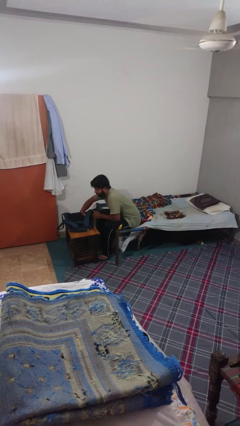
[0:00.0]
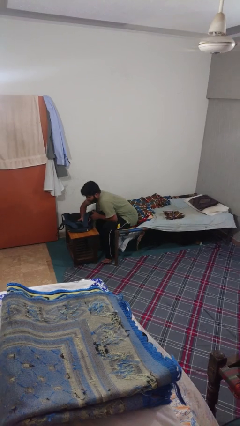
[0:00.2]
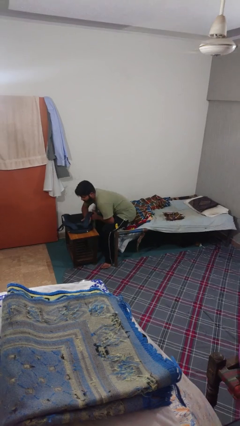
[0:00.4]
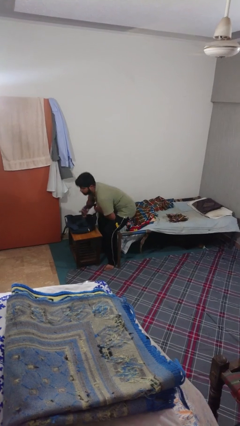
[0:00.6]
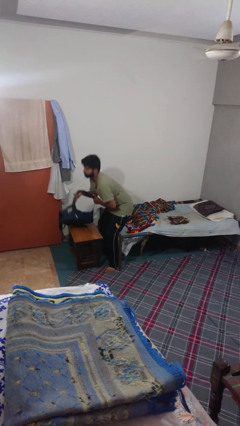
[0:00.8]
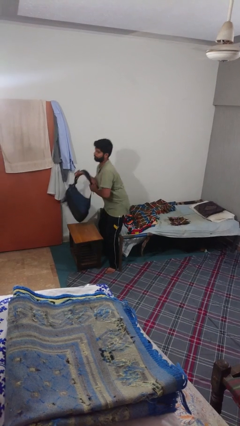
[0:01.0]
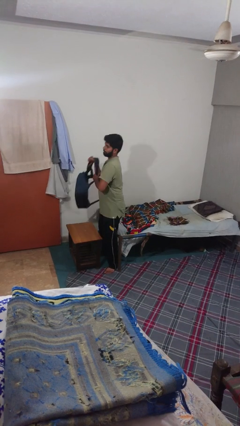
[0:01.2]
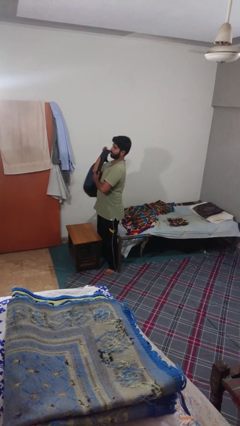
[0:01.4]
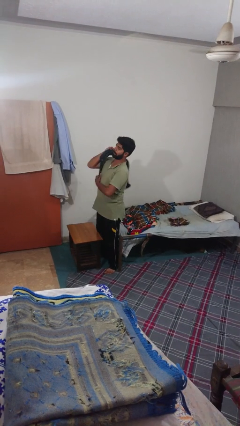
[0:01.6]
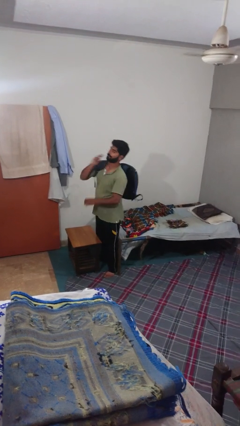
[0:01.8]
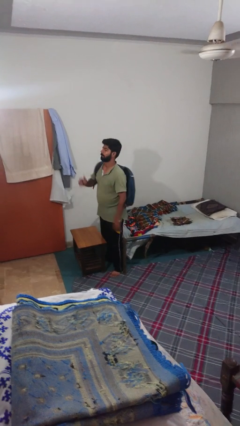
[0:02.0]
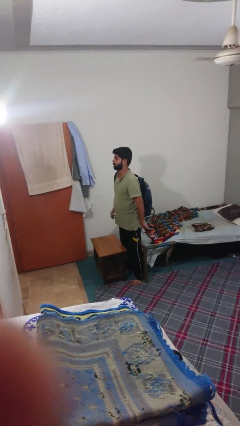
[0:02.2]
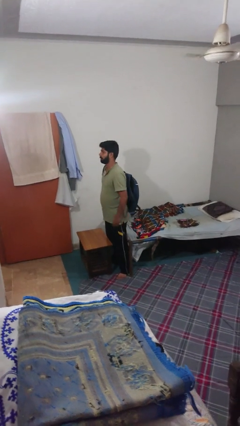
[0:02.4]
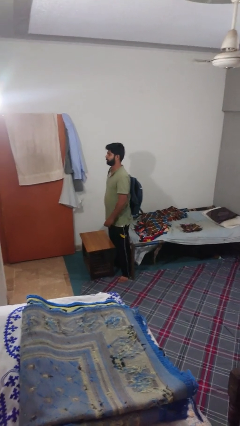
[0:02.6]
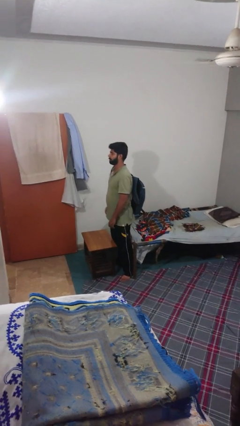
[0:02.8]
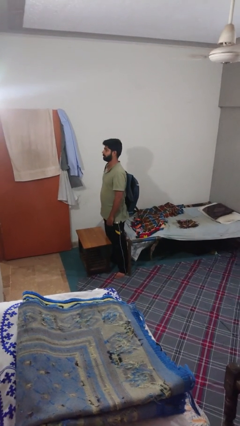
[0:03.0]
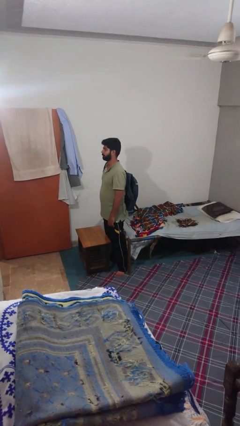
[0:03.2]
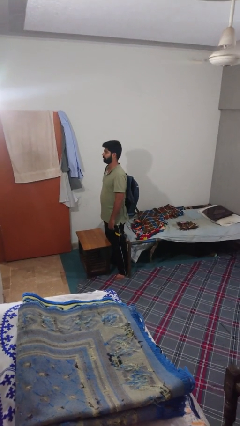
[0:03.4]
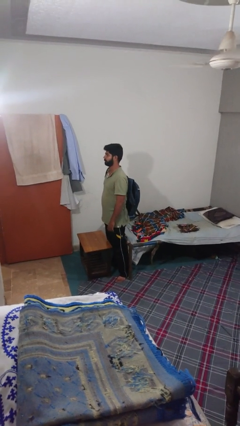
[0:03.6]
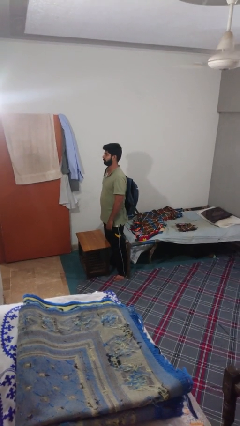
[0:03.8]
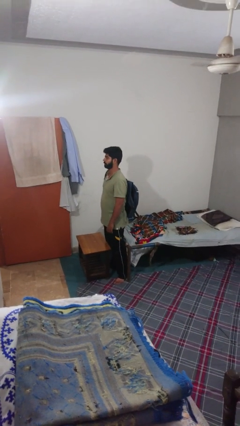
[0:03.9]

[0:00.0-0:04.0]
person puts on backpack

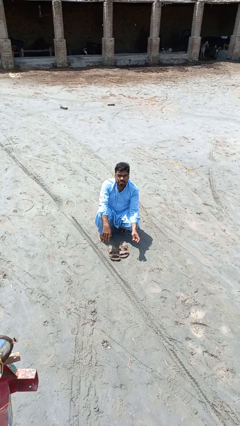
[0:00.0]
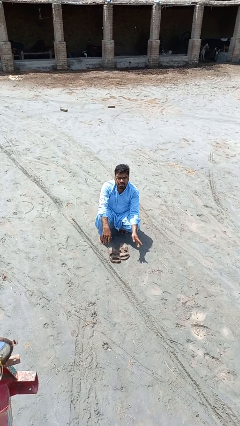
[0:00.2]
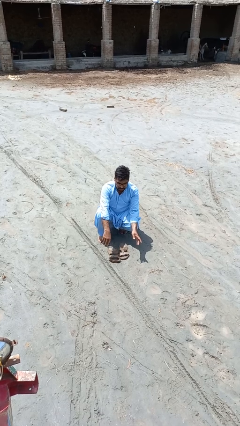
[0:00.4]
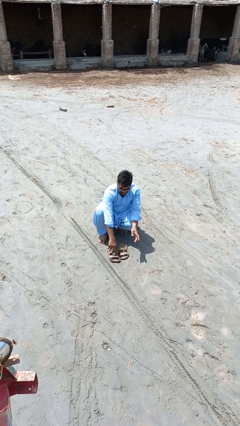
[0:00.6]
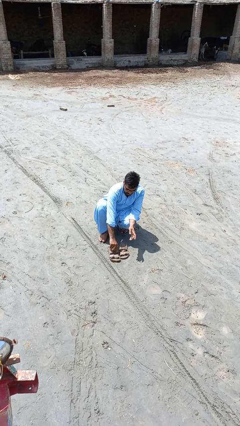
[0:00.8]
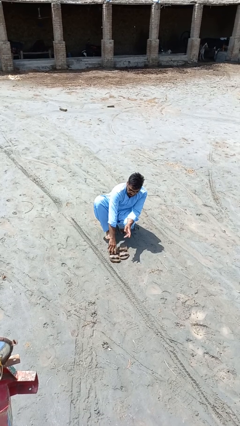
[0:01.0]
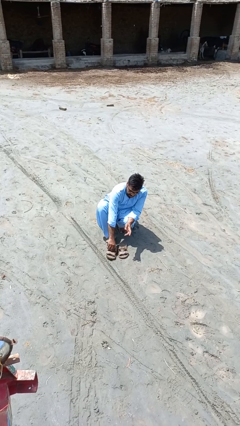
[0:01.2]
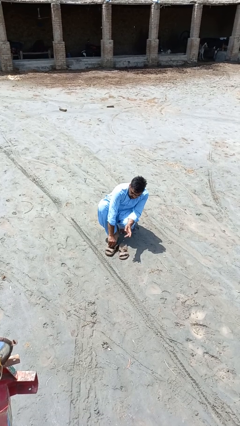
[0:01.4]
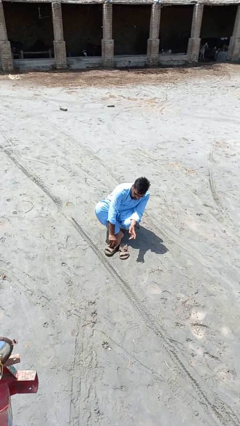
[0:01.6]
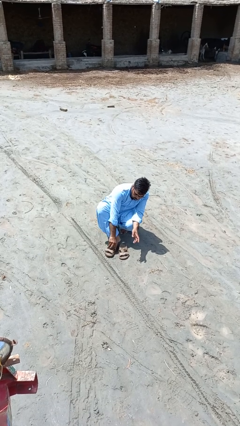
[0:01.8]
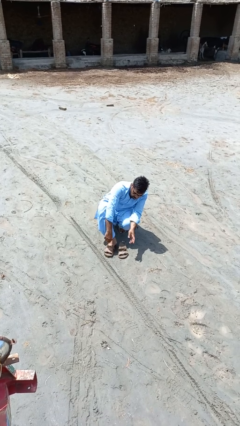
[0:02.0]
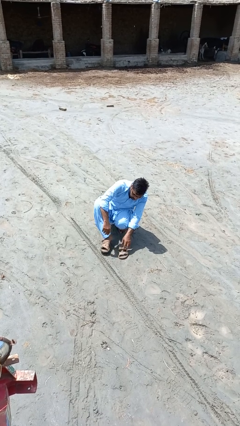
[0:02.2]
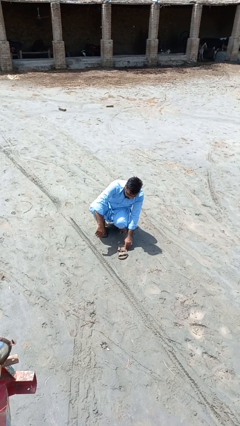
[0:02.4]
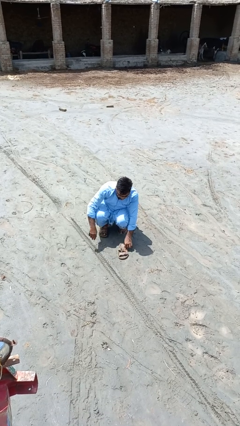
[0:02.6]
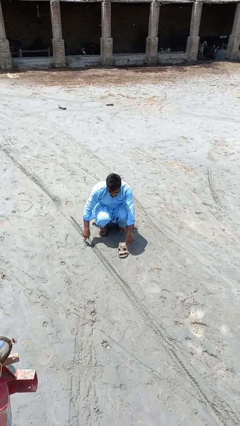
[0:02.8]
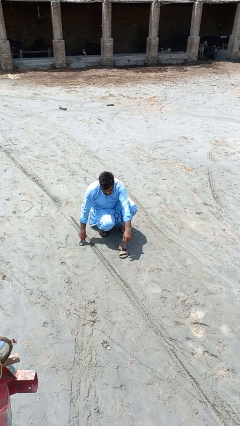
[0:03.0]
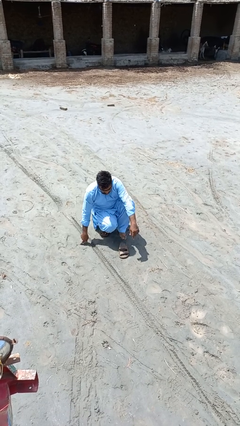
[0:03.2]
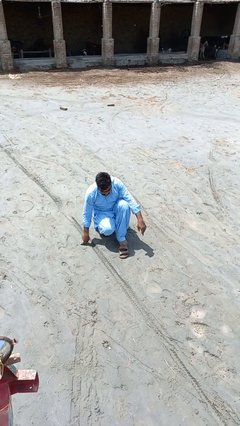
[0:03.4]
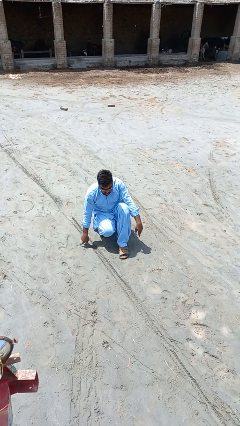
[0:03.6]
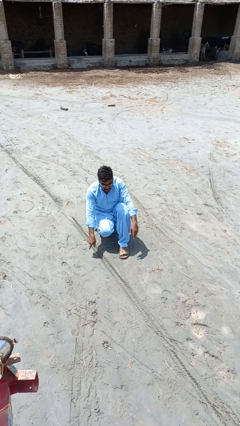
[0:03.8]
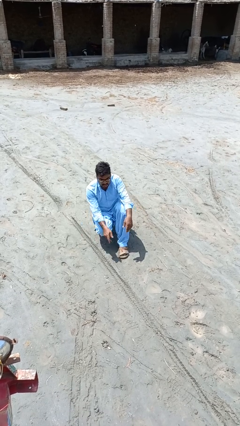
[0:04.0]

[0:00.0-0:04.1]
person puts on shoes

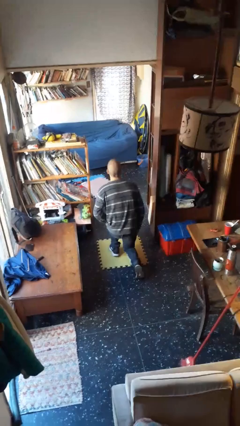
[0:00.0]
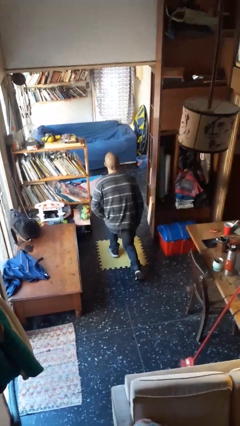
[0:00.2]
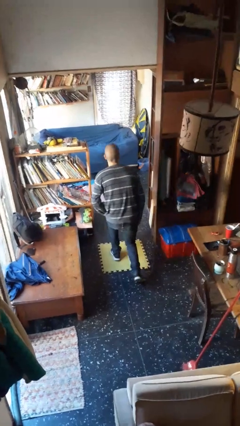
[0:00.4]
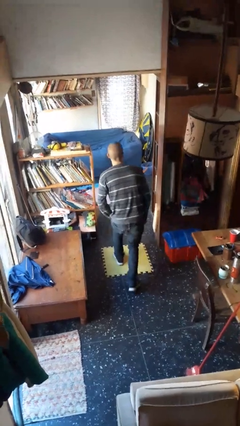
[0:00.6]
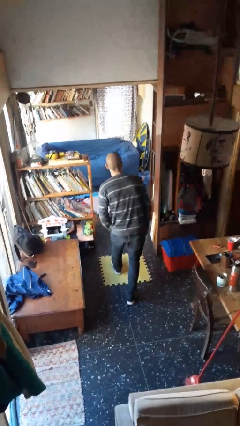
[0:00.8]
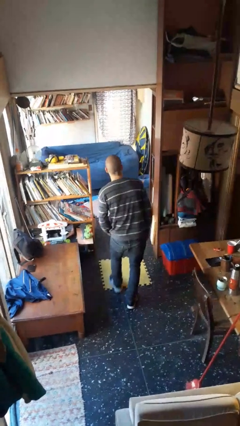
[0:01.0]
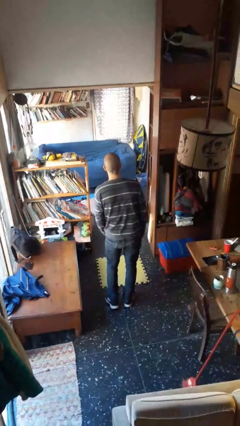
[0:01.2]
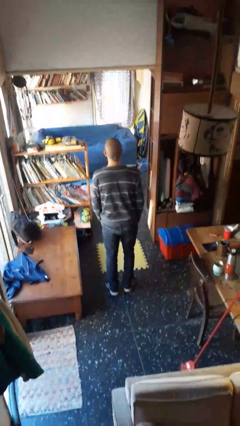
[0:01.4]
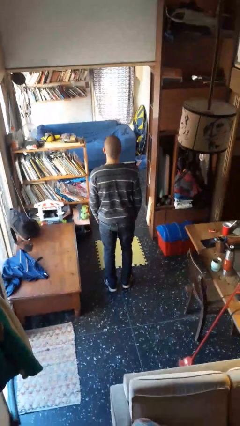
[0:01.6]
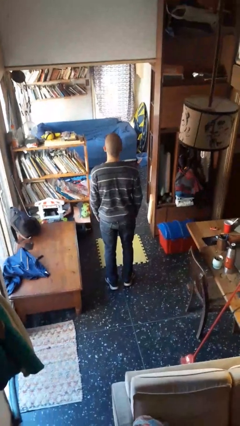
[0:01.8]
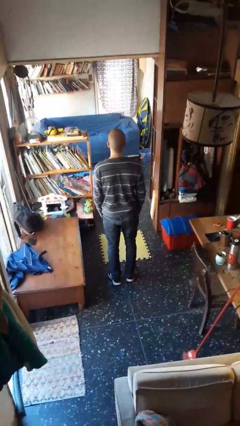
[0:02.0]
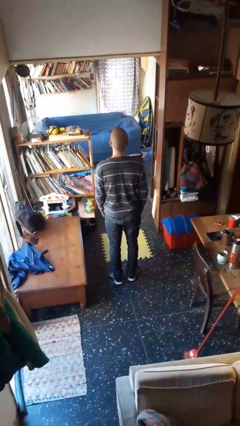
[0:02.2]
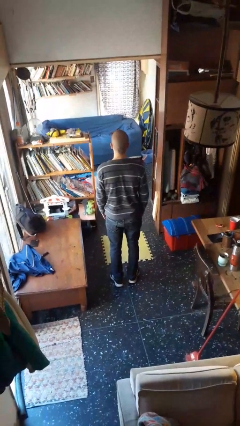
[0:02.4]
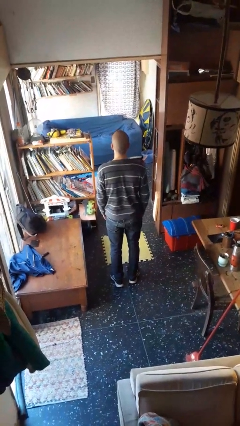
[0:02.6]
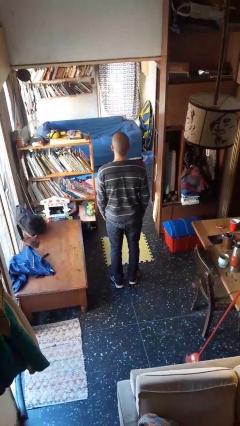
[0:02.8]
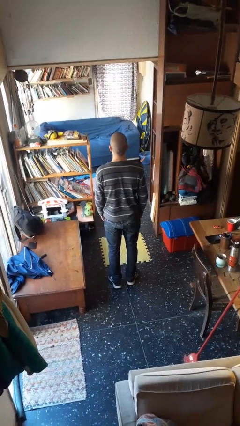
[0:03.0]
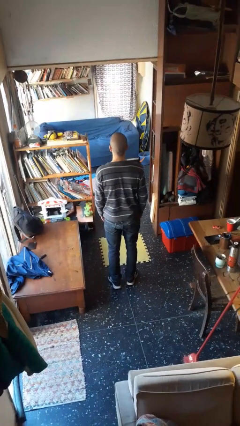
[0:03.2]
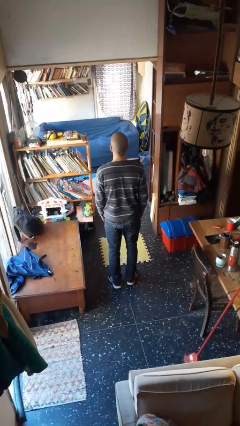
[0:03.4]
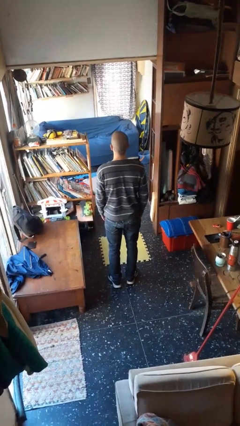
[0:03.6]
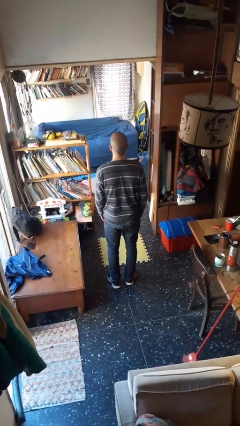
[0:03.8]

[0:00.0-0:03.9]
person stands up from floor

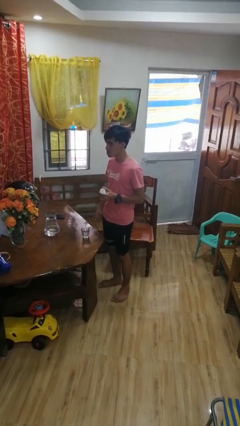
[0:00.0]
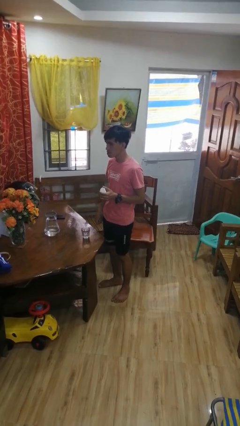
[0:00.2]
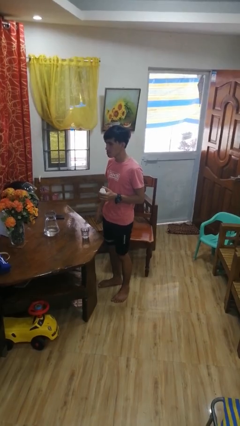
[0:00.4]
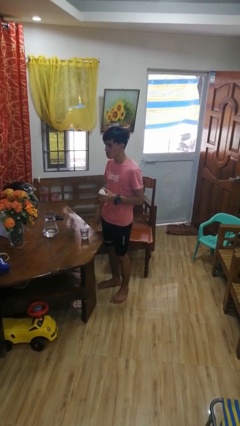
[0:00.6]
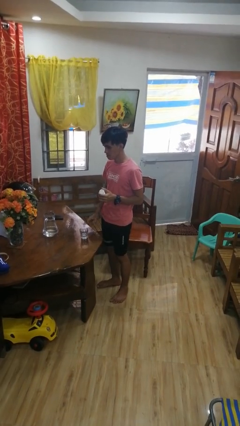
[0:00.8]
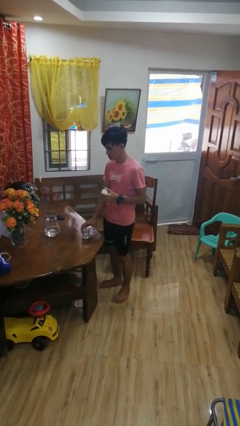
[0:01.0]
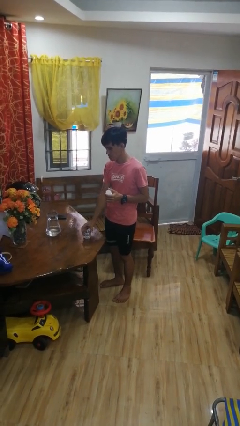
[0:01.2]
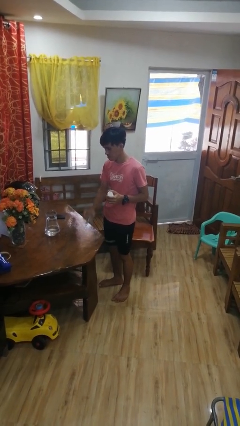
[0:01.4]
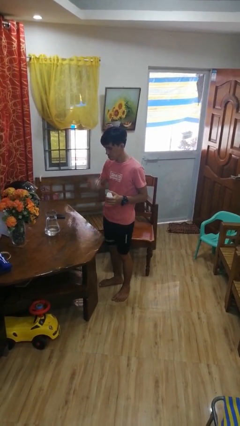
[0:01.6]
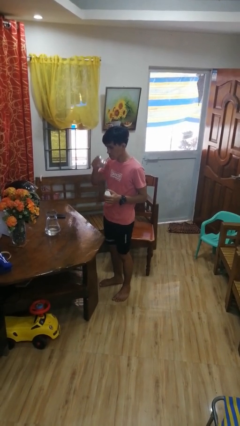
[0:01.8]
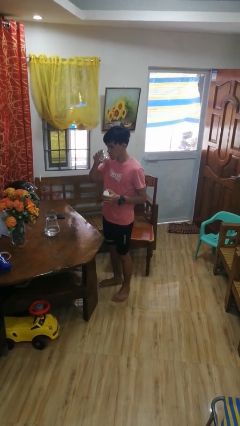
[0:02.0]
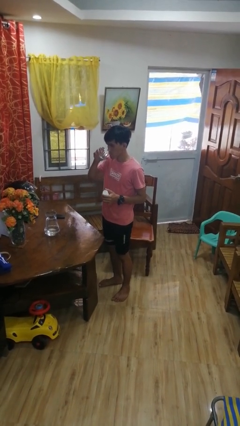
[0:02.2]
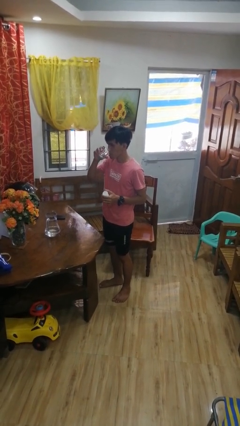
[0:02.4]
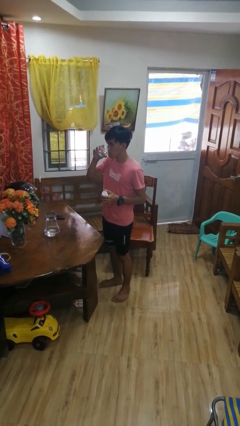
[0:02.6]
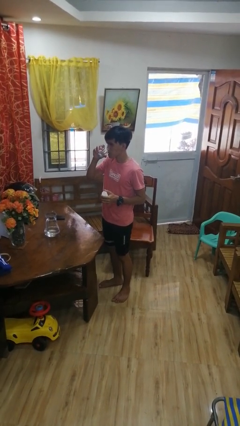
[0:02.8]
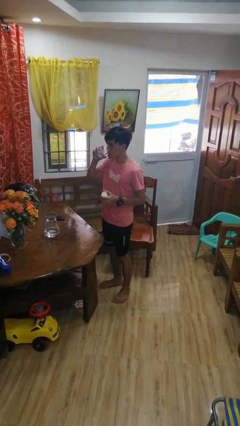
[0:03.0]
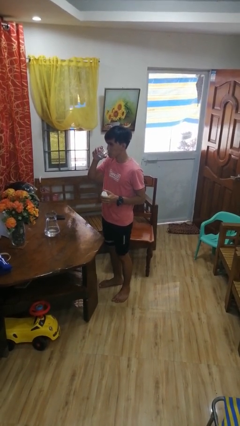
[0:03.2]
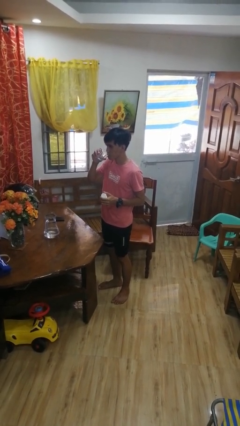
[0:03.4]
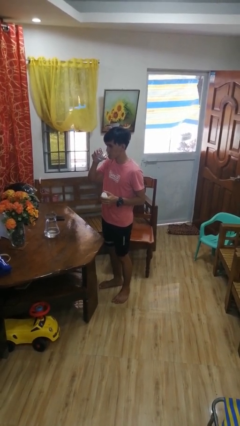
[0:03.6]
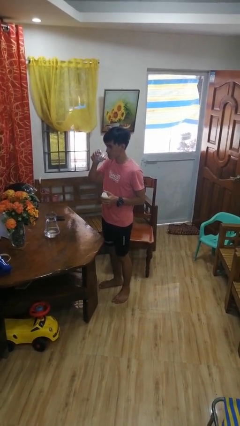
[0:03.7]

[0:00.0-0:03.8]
person drinks from cup

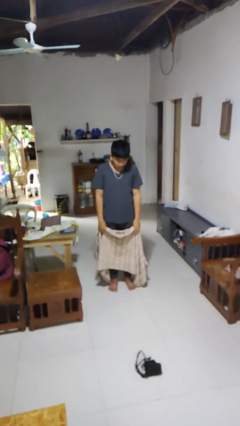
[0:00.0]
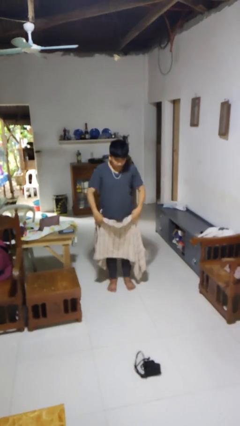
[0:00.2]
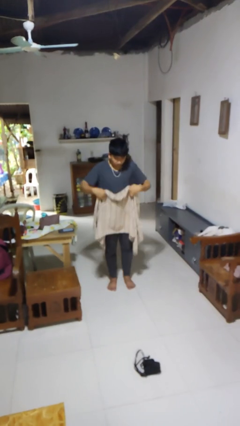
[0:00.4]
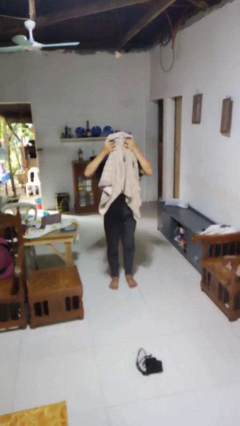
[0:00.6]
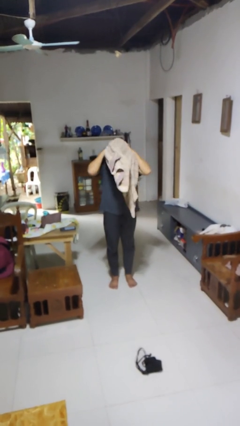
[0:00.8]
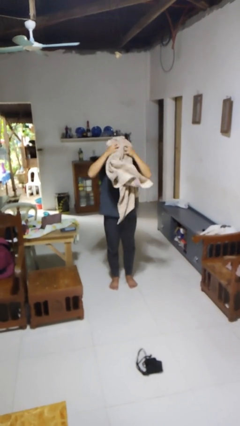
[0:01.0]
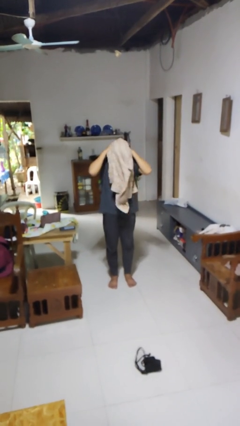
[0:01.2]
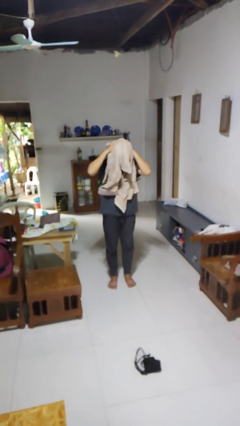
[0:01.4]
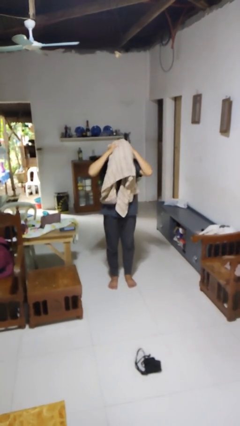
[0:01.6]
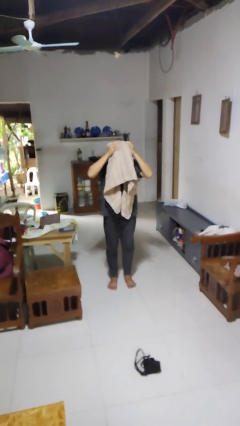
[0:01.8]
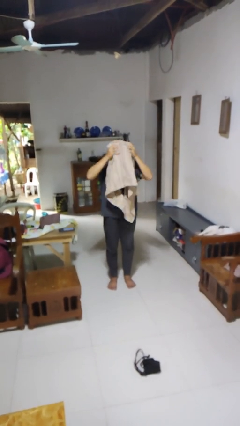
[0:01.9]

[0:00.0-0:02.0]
person dries hair with towel
